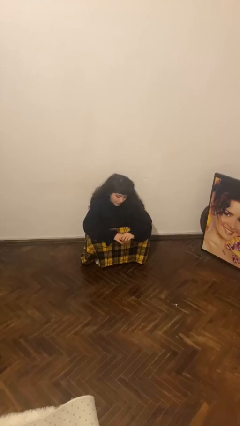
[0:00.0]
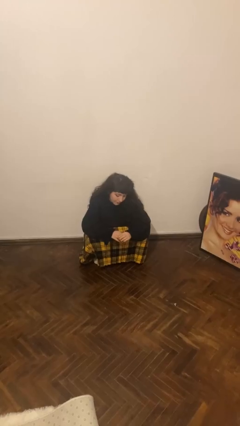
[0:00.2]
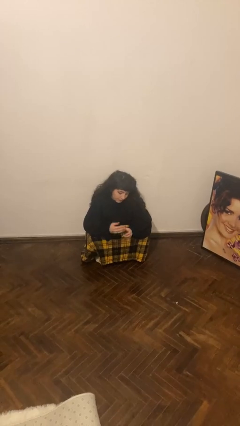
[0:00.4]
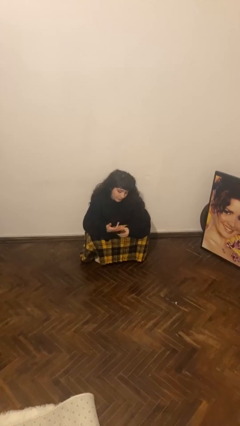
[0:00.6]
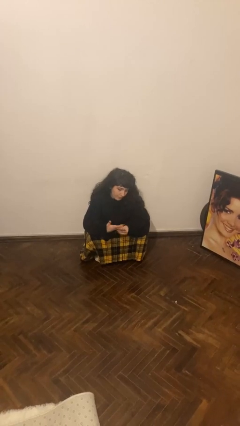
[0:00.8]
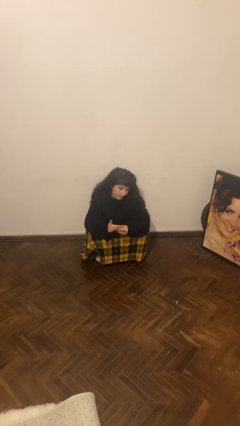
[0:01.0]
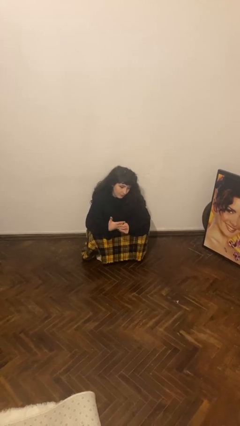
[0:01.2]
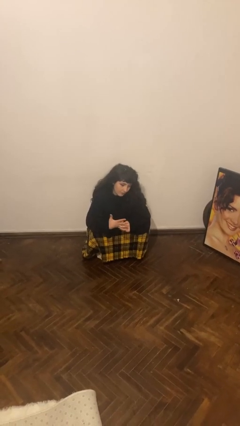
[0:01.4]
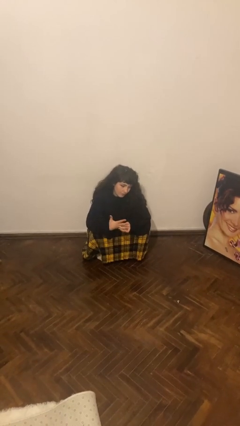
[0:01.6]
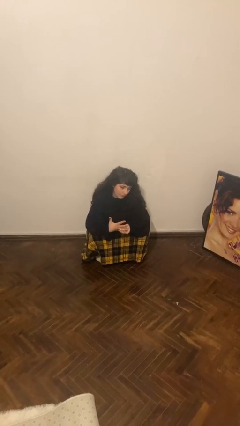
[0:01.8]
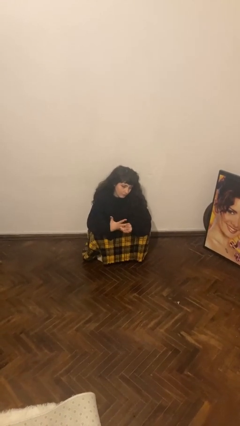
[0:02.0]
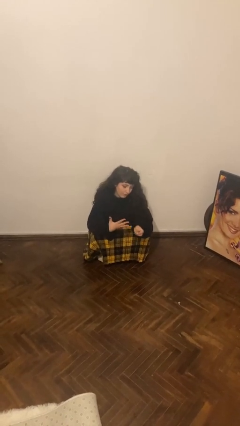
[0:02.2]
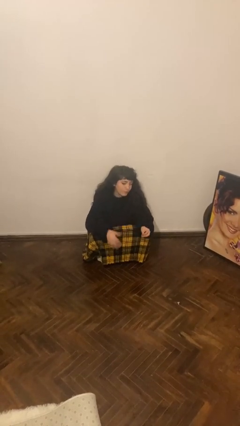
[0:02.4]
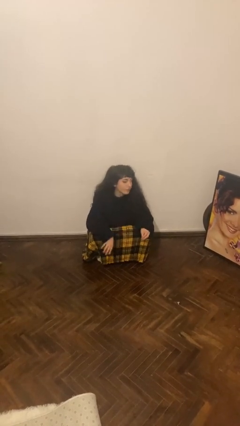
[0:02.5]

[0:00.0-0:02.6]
person takes off ring

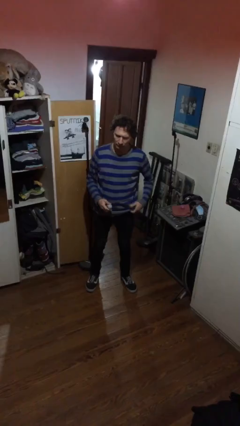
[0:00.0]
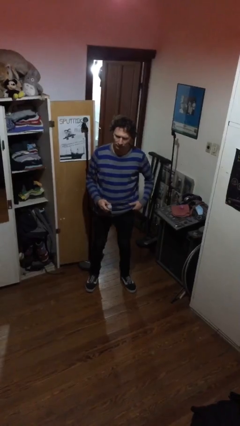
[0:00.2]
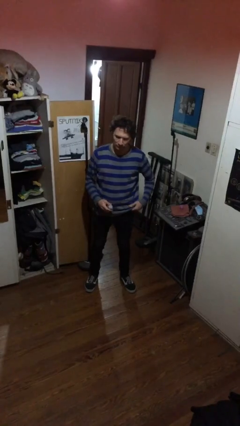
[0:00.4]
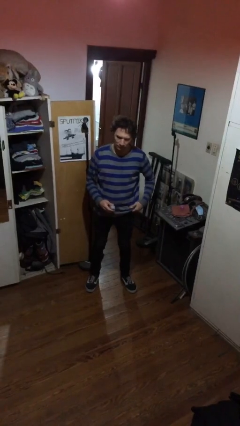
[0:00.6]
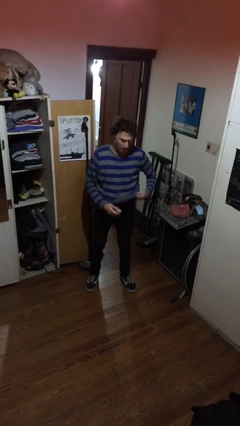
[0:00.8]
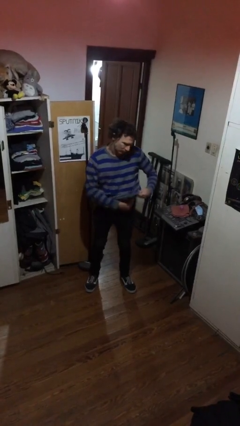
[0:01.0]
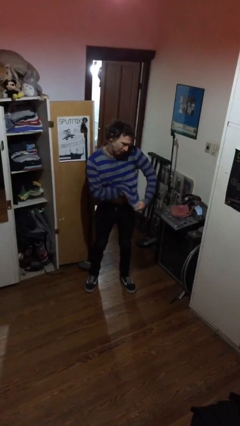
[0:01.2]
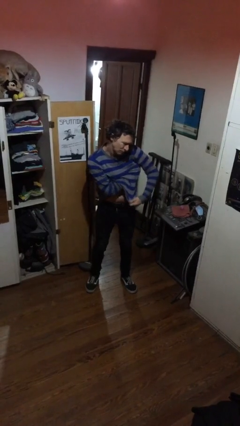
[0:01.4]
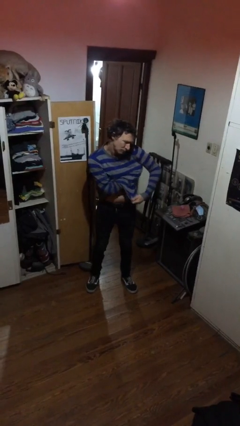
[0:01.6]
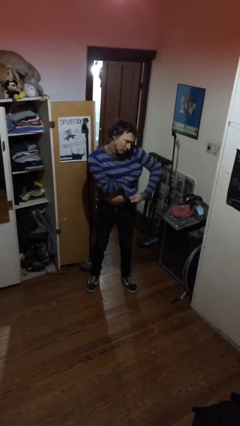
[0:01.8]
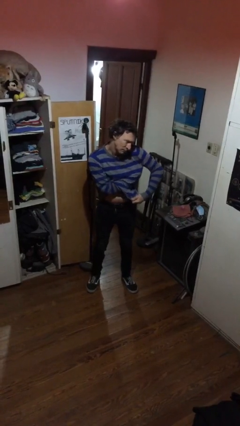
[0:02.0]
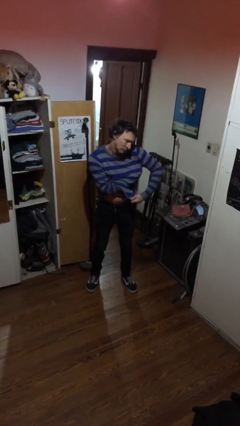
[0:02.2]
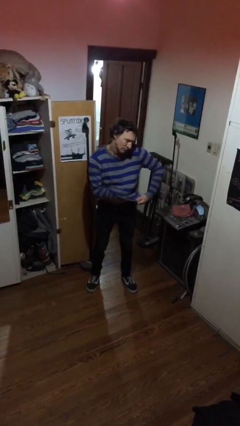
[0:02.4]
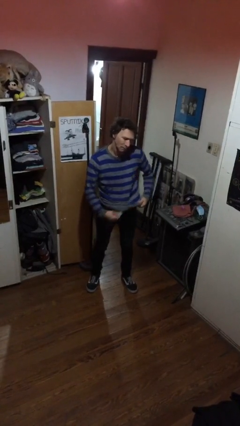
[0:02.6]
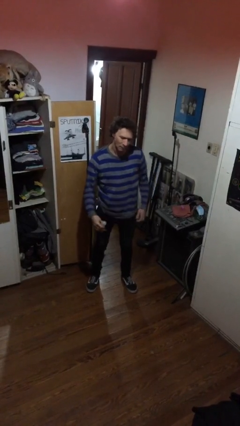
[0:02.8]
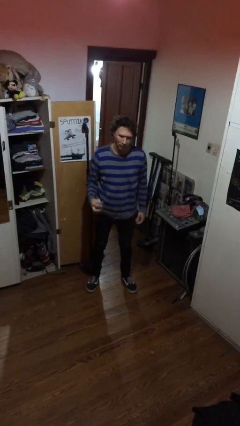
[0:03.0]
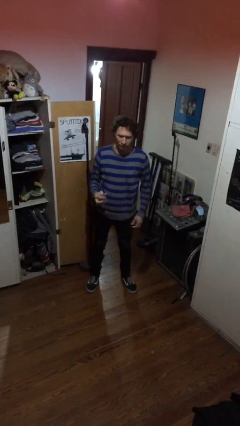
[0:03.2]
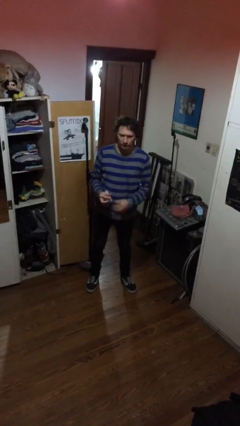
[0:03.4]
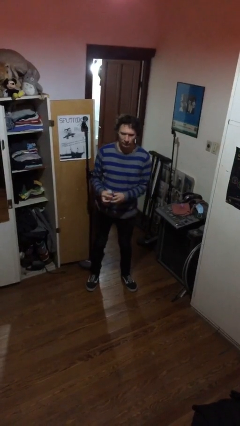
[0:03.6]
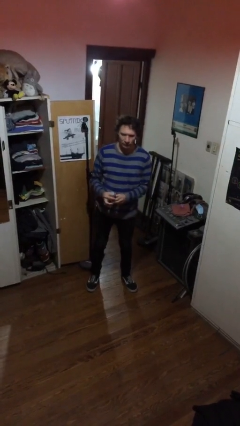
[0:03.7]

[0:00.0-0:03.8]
person applies deodorant

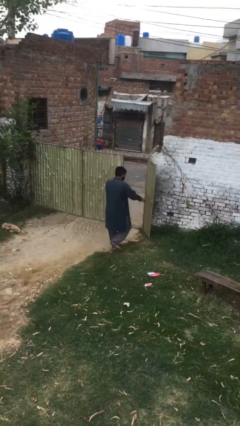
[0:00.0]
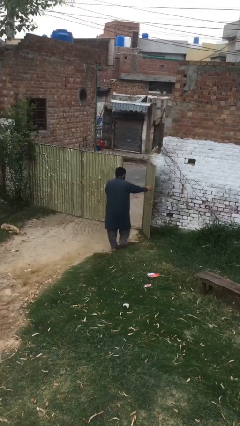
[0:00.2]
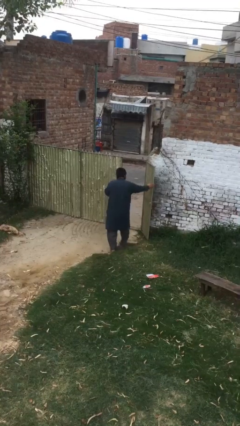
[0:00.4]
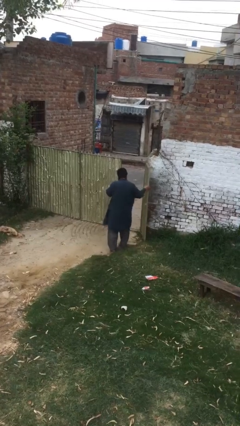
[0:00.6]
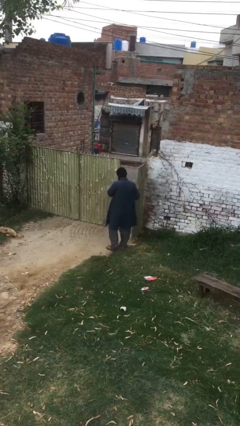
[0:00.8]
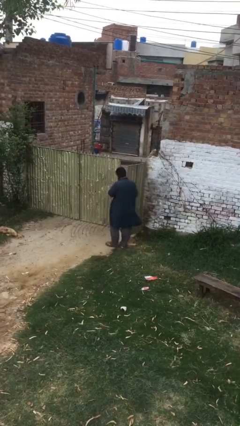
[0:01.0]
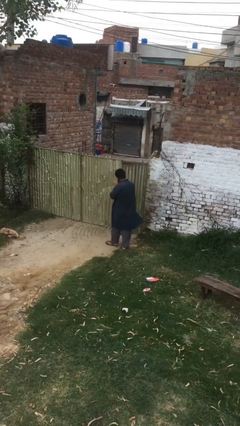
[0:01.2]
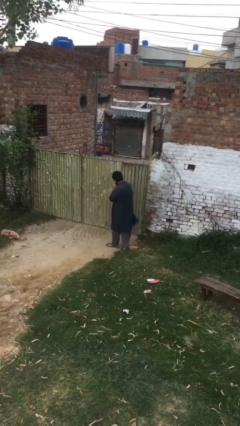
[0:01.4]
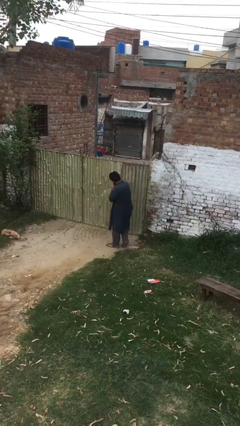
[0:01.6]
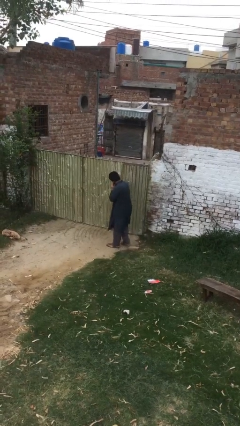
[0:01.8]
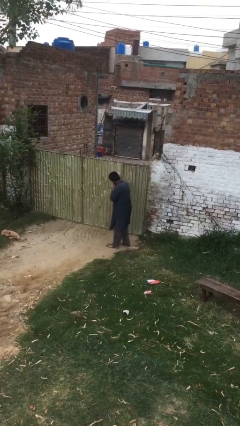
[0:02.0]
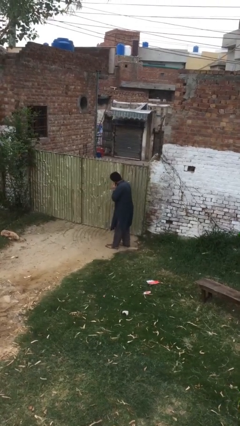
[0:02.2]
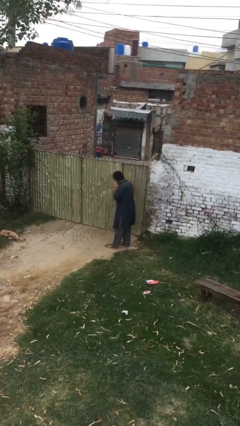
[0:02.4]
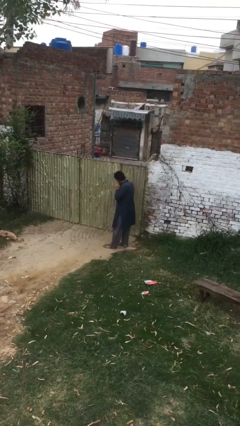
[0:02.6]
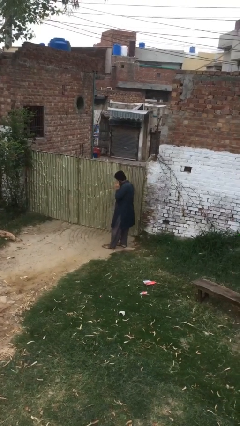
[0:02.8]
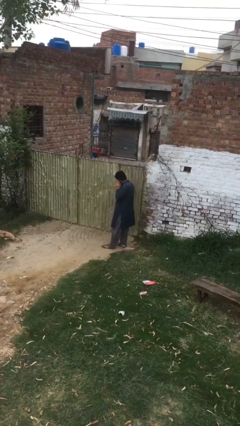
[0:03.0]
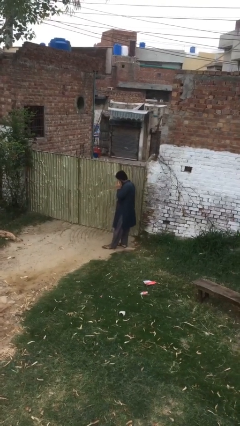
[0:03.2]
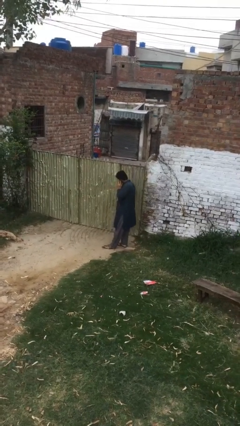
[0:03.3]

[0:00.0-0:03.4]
person closes facility door

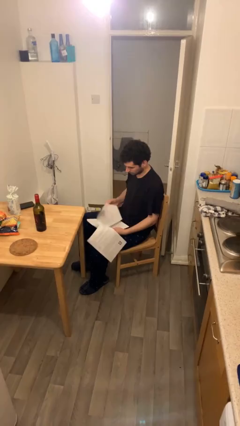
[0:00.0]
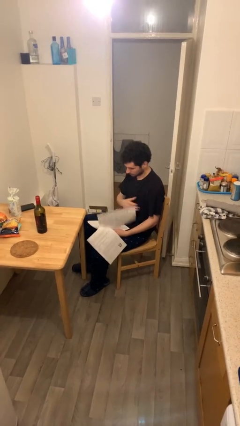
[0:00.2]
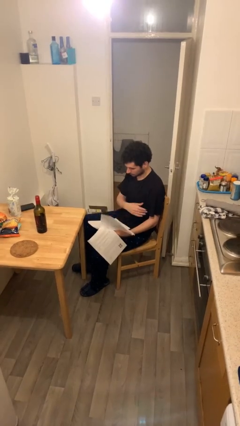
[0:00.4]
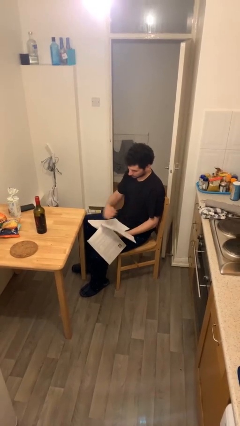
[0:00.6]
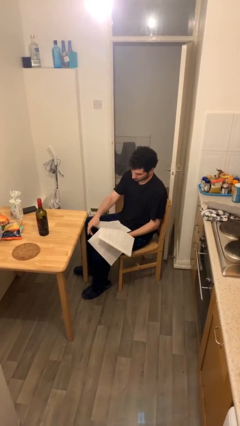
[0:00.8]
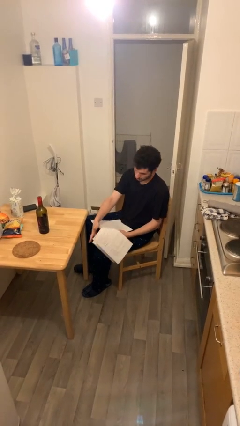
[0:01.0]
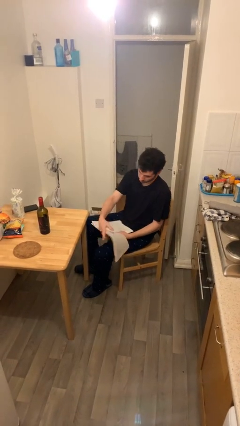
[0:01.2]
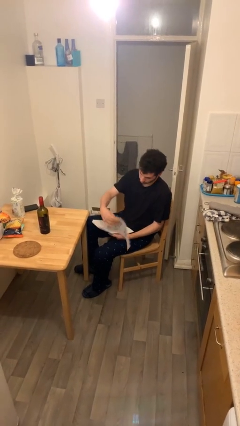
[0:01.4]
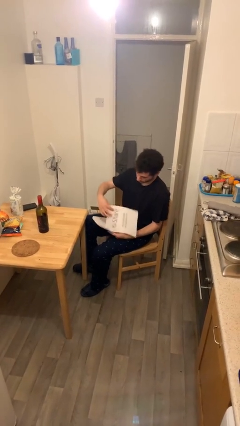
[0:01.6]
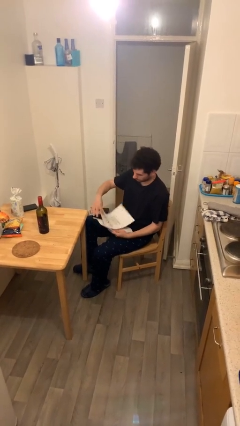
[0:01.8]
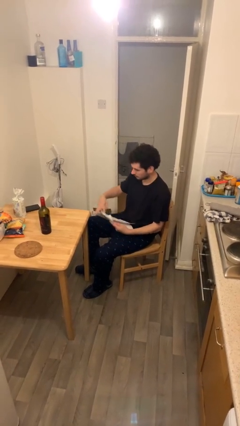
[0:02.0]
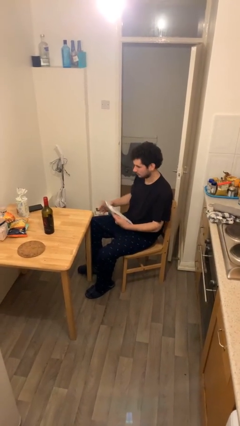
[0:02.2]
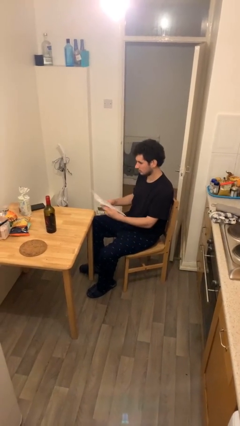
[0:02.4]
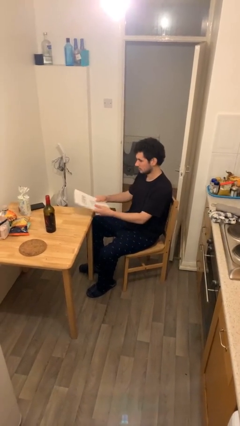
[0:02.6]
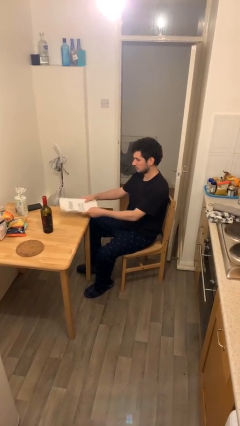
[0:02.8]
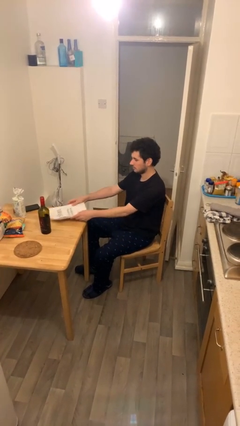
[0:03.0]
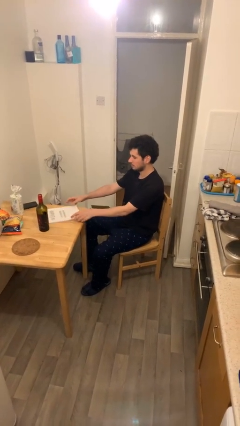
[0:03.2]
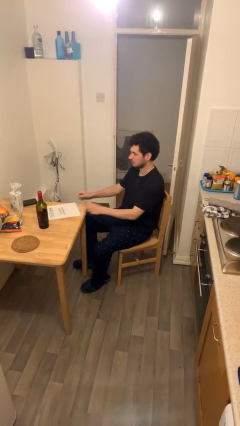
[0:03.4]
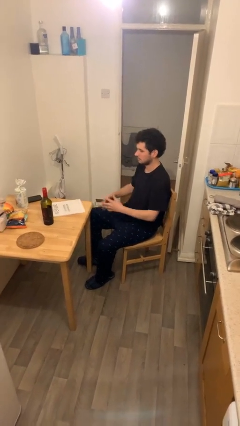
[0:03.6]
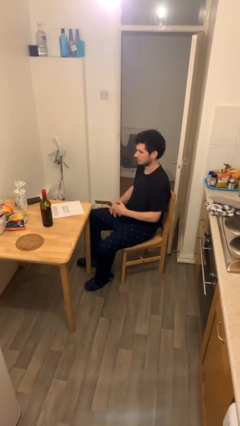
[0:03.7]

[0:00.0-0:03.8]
person puts down object on table

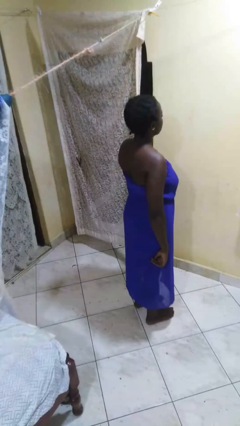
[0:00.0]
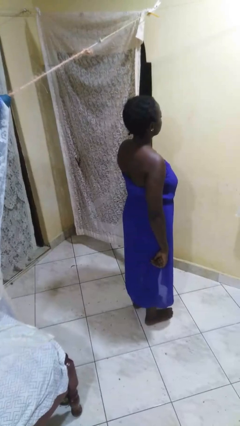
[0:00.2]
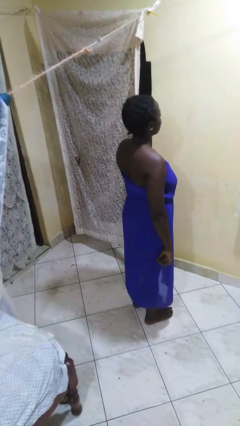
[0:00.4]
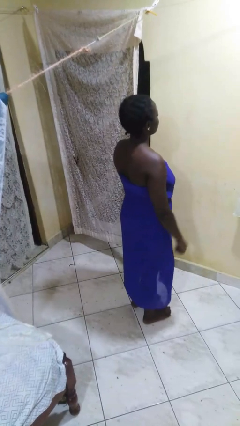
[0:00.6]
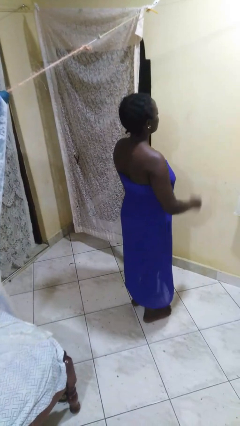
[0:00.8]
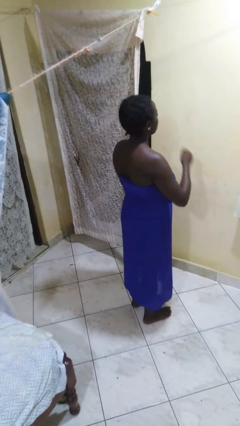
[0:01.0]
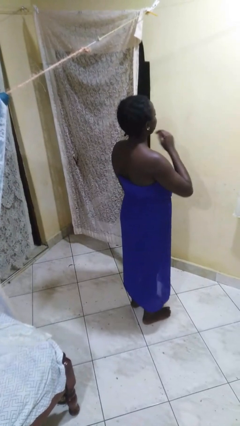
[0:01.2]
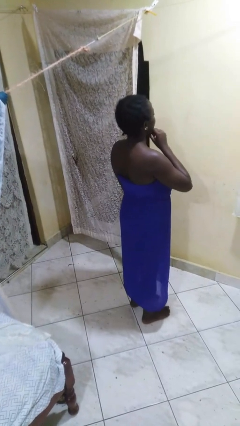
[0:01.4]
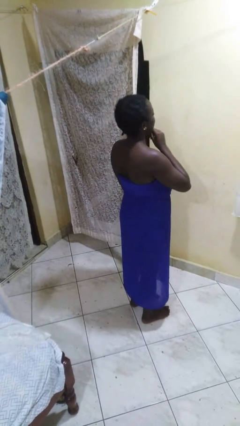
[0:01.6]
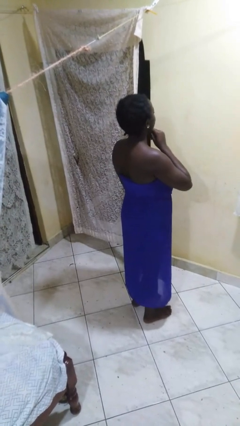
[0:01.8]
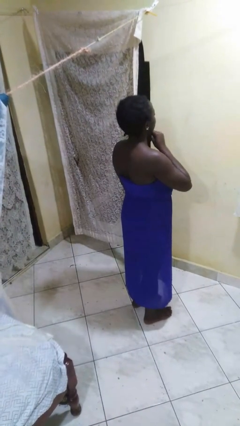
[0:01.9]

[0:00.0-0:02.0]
person strokes chin

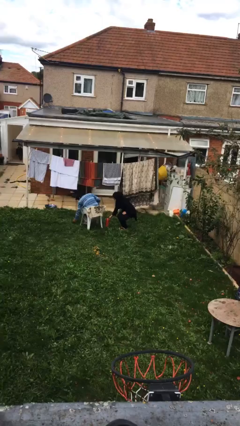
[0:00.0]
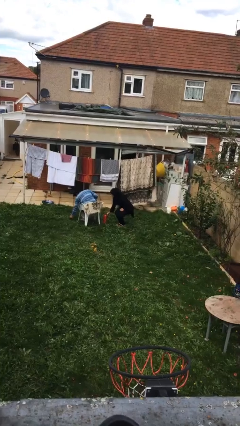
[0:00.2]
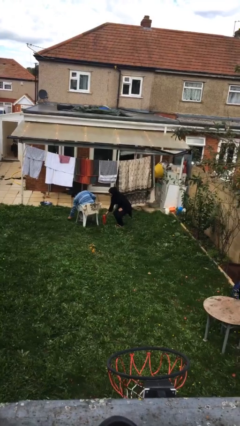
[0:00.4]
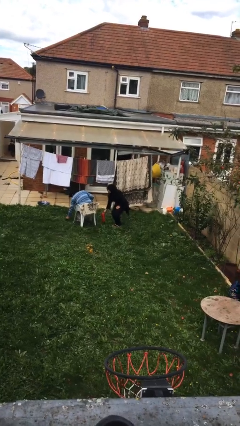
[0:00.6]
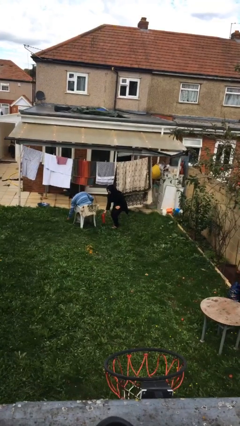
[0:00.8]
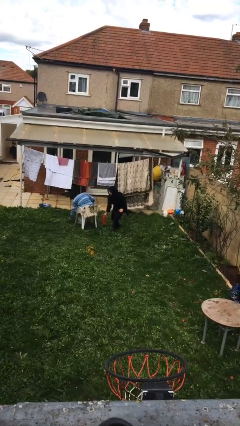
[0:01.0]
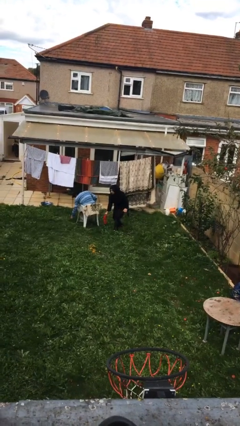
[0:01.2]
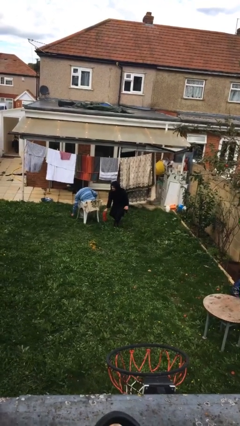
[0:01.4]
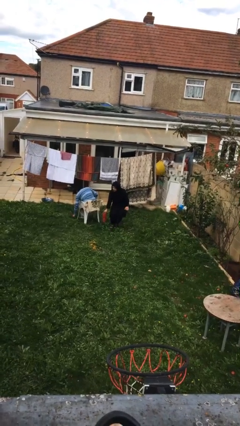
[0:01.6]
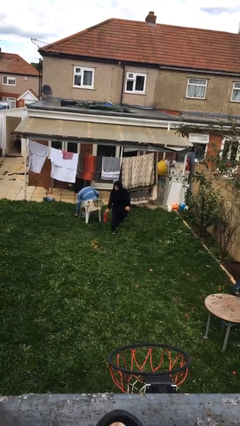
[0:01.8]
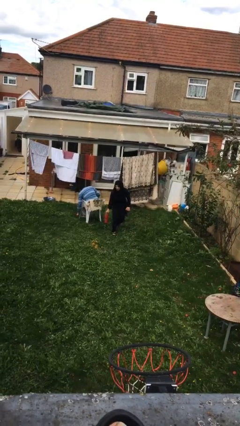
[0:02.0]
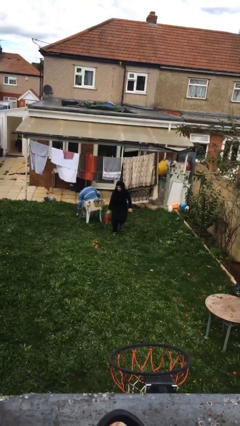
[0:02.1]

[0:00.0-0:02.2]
person steals object from person

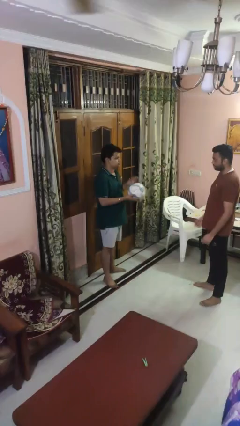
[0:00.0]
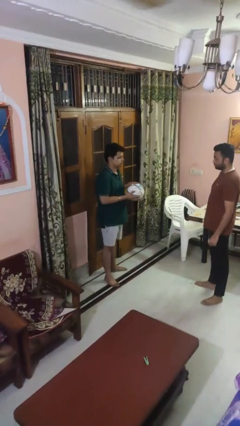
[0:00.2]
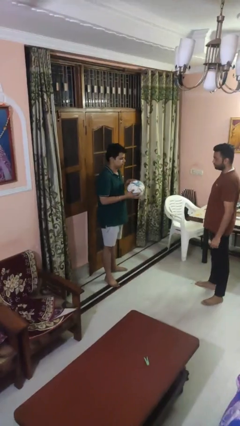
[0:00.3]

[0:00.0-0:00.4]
person catches object from person
